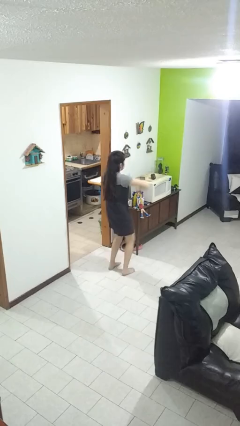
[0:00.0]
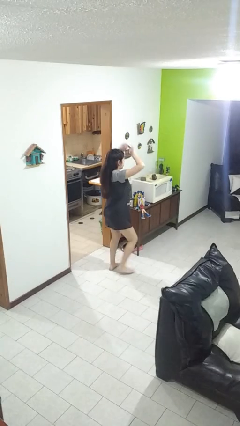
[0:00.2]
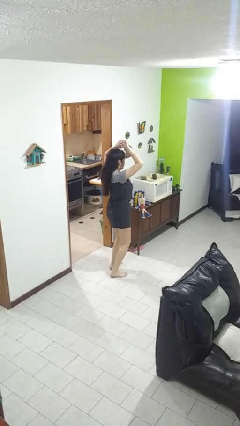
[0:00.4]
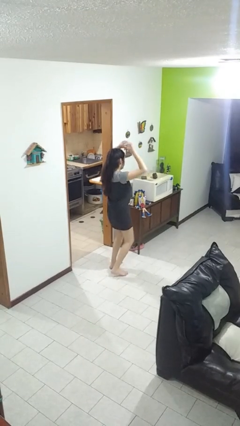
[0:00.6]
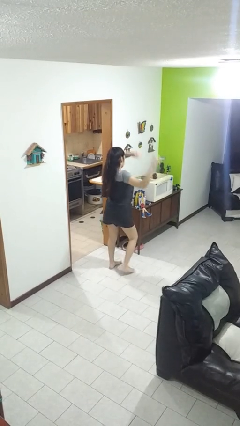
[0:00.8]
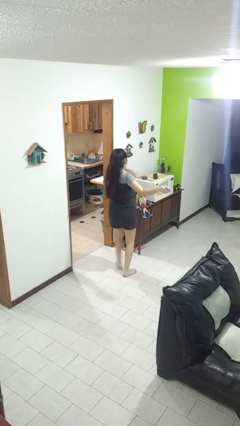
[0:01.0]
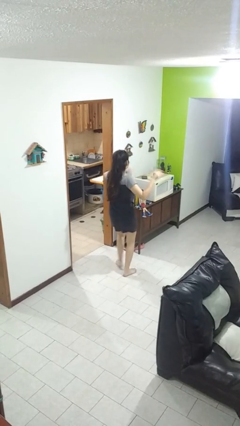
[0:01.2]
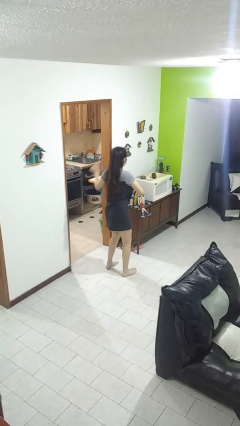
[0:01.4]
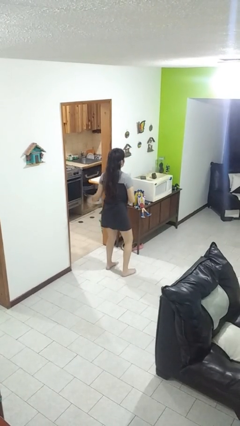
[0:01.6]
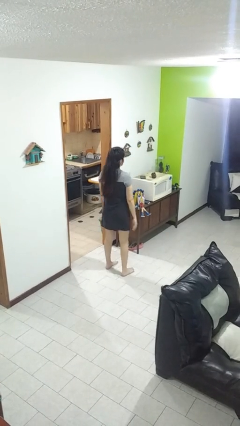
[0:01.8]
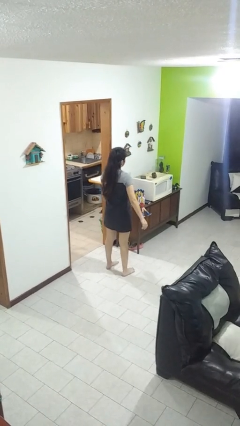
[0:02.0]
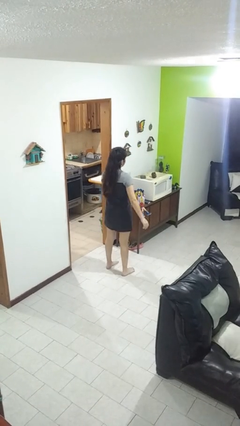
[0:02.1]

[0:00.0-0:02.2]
person dances in place

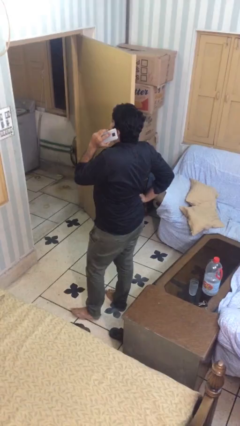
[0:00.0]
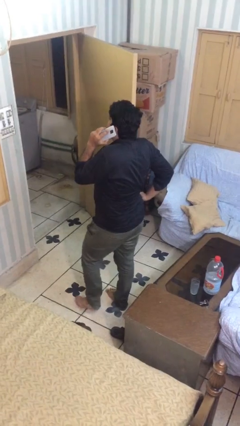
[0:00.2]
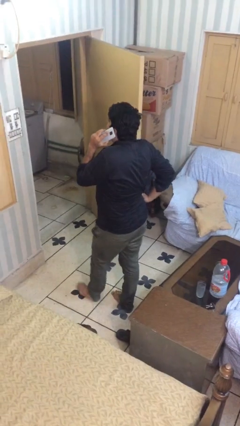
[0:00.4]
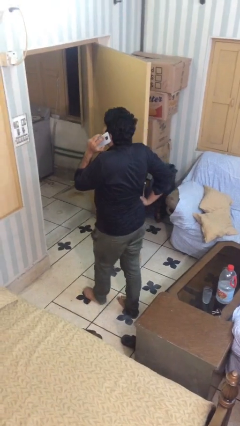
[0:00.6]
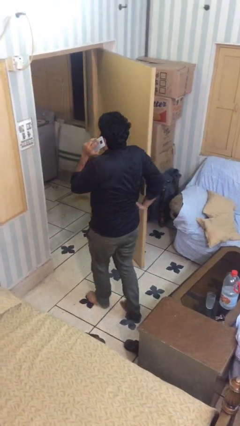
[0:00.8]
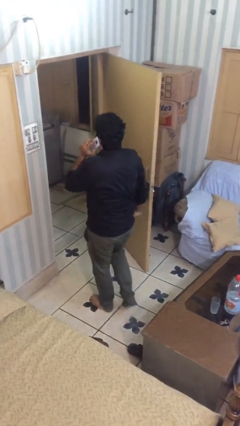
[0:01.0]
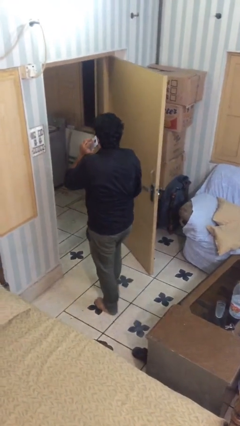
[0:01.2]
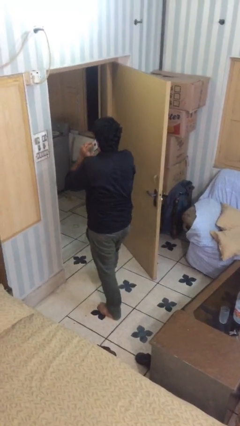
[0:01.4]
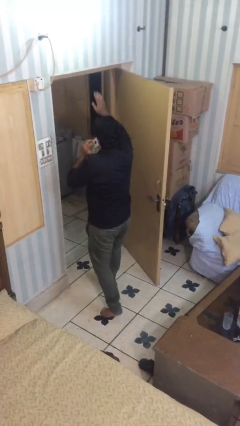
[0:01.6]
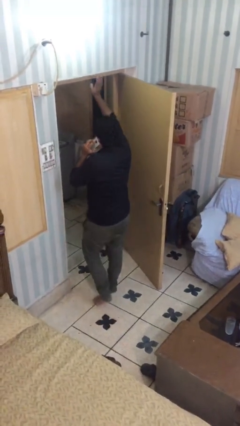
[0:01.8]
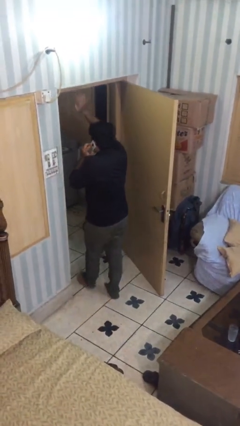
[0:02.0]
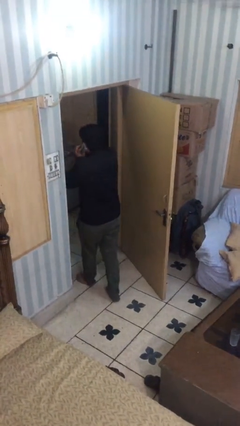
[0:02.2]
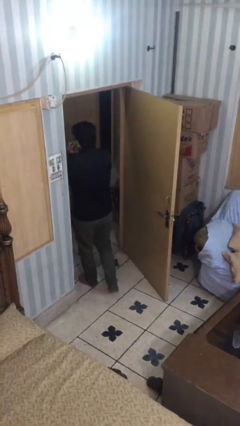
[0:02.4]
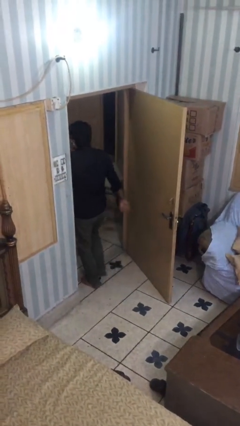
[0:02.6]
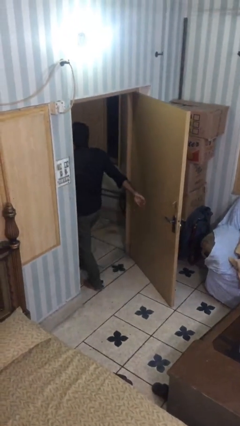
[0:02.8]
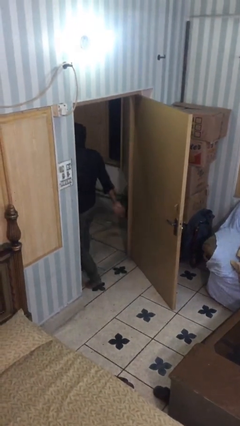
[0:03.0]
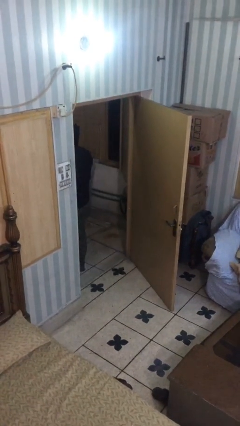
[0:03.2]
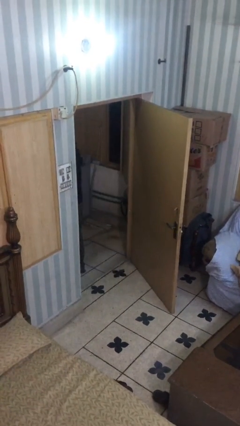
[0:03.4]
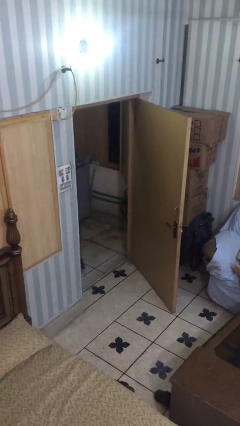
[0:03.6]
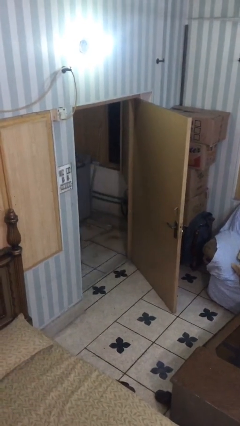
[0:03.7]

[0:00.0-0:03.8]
person exits scene through structure

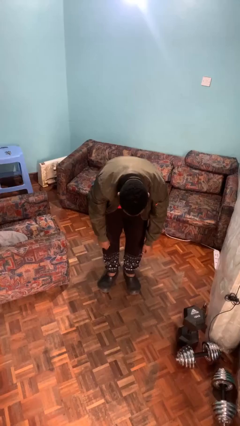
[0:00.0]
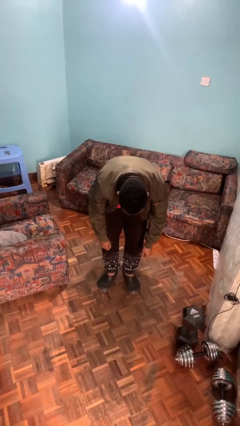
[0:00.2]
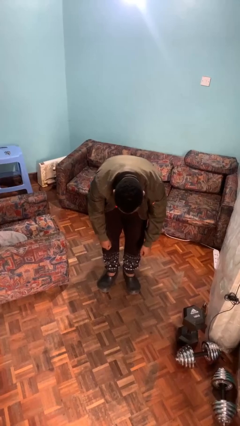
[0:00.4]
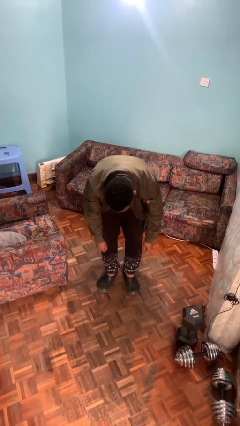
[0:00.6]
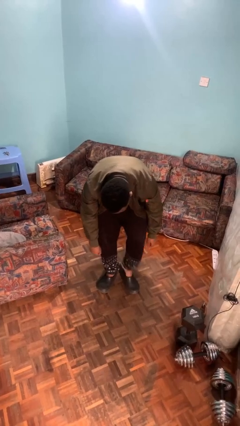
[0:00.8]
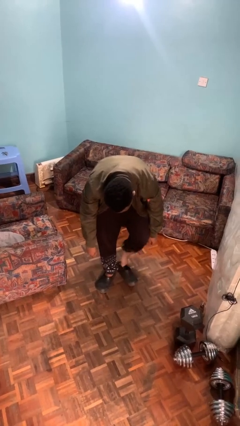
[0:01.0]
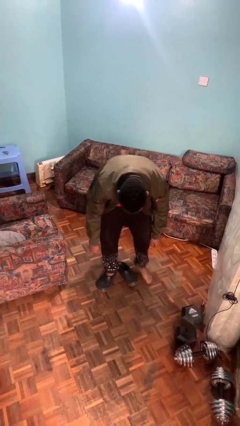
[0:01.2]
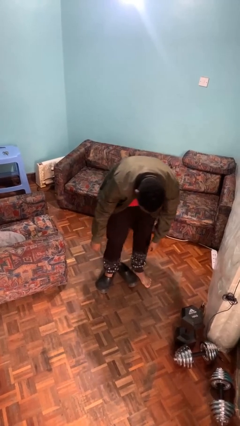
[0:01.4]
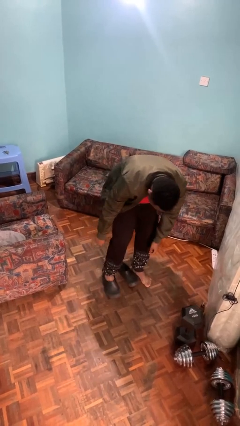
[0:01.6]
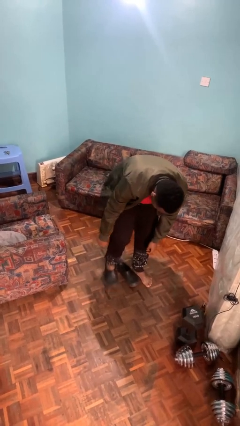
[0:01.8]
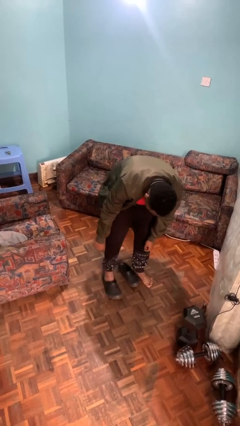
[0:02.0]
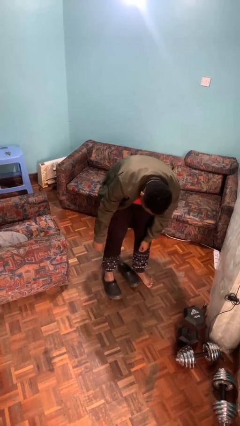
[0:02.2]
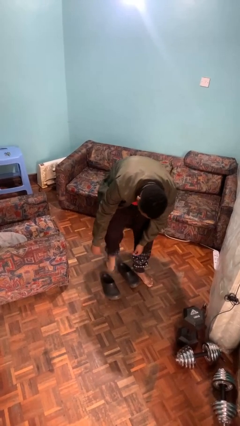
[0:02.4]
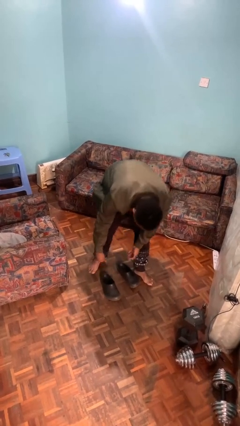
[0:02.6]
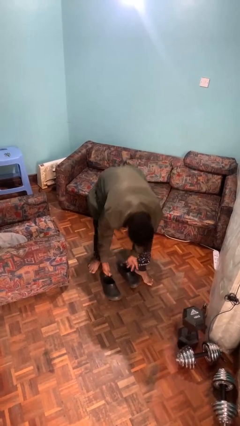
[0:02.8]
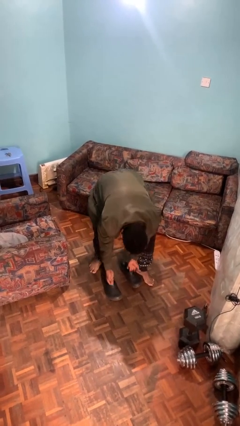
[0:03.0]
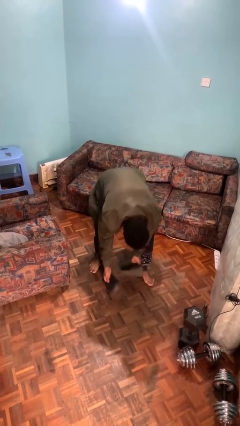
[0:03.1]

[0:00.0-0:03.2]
person takes off shoes

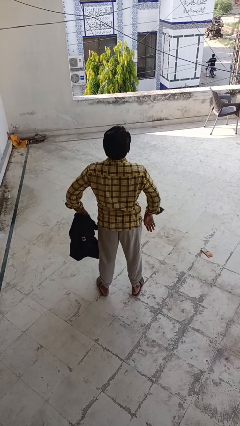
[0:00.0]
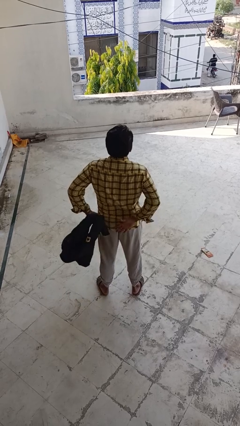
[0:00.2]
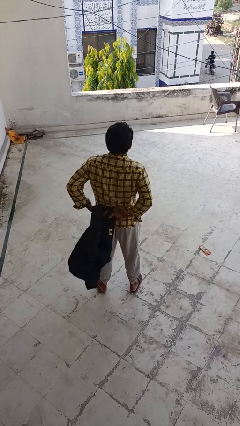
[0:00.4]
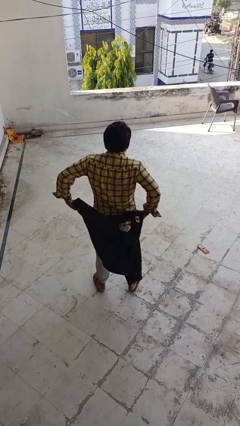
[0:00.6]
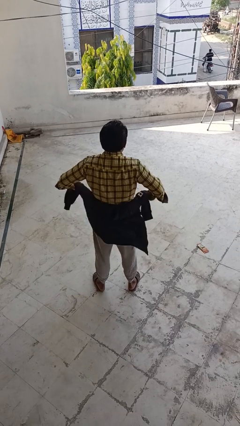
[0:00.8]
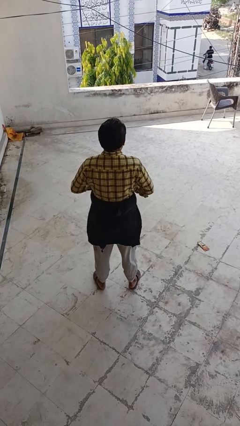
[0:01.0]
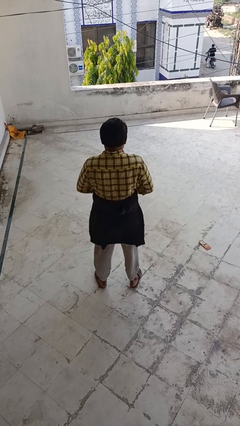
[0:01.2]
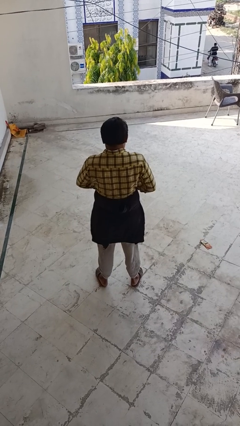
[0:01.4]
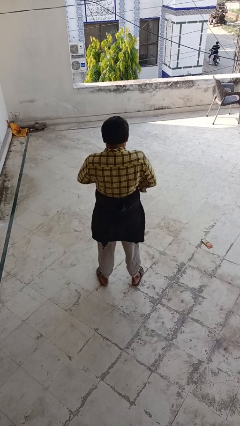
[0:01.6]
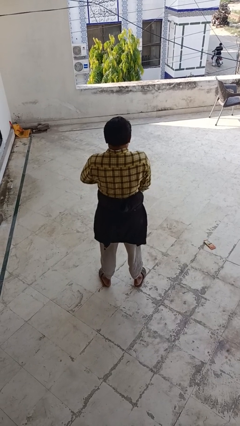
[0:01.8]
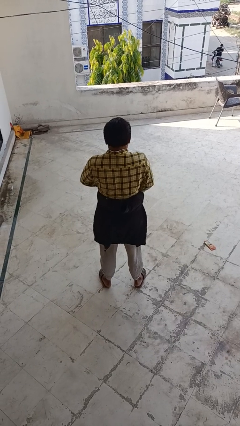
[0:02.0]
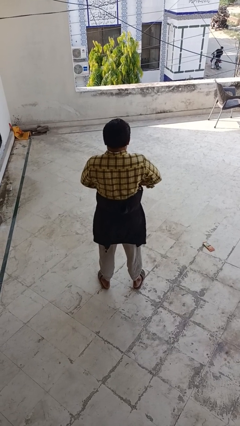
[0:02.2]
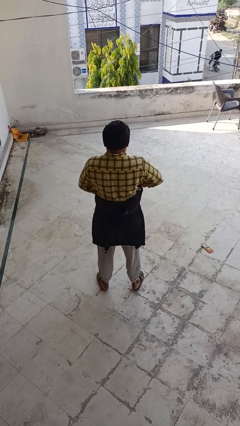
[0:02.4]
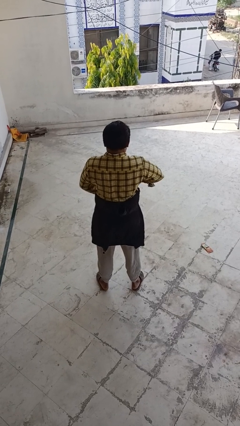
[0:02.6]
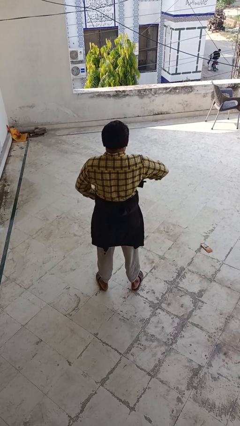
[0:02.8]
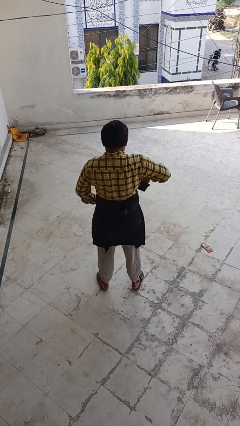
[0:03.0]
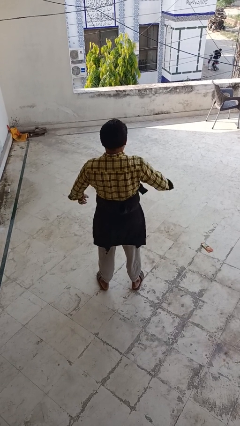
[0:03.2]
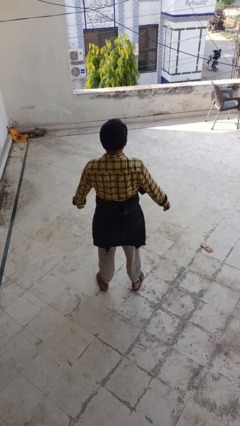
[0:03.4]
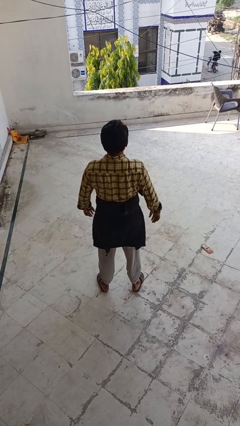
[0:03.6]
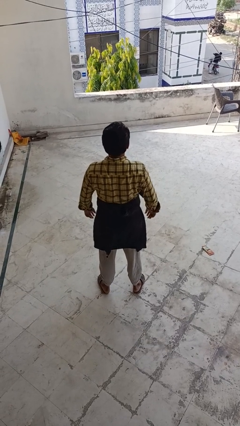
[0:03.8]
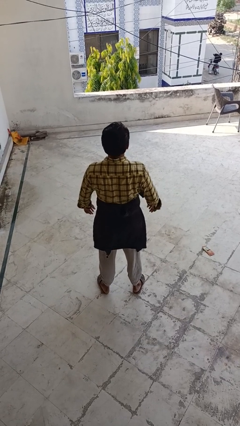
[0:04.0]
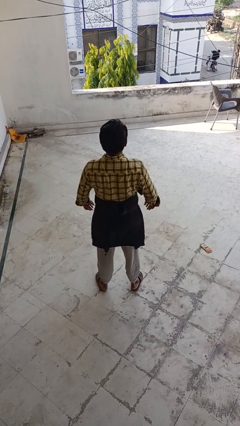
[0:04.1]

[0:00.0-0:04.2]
person ties jacket around waist

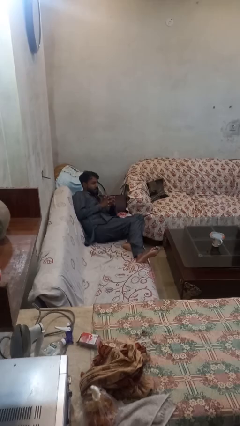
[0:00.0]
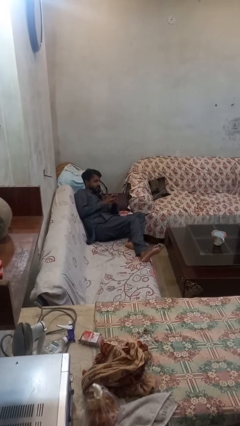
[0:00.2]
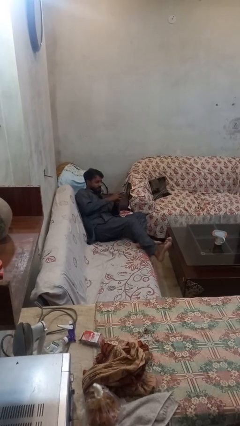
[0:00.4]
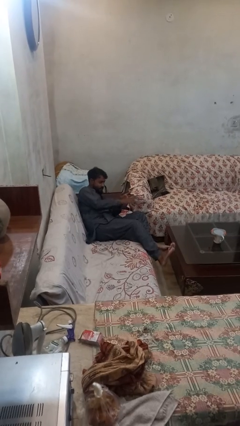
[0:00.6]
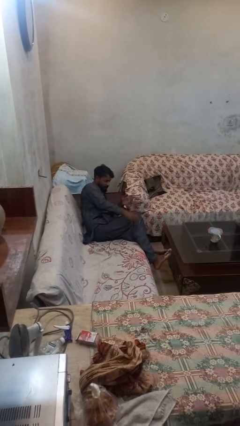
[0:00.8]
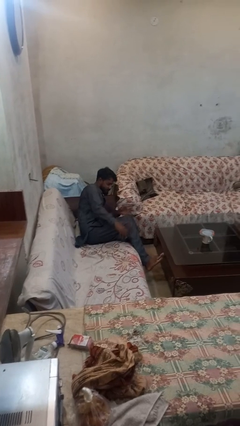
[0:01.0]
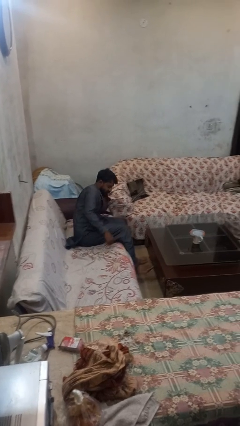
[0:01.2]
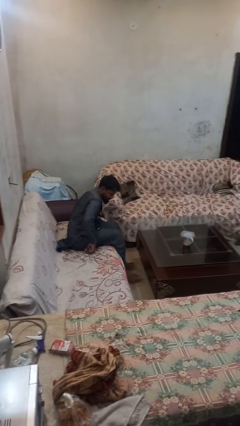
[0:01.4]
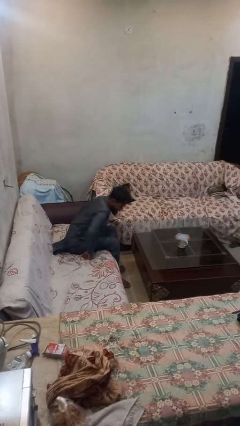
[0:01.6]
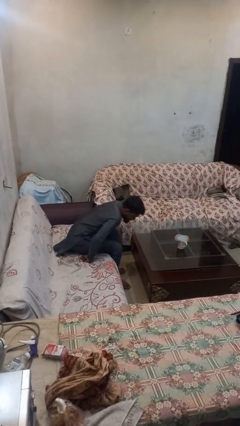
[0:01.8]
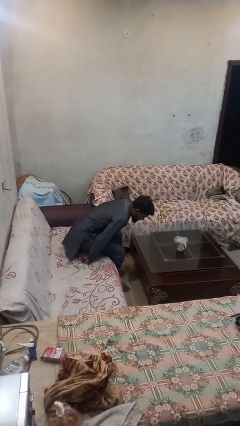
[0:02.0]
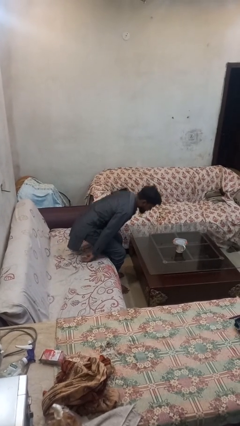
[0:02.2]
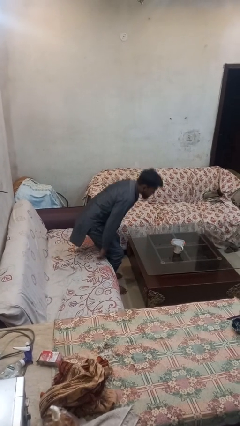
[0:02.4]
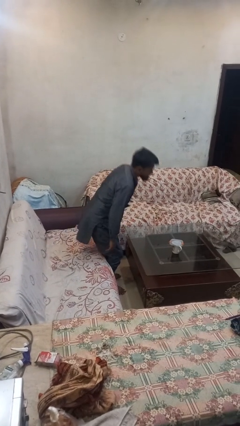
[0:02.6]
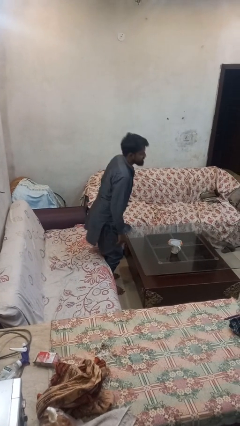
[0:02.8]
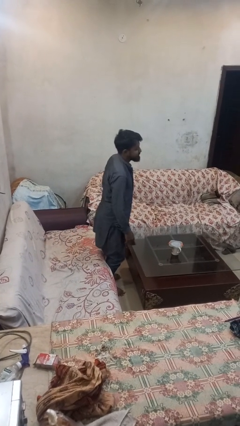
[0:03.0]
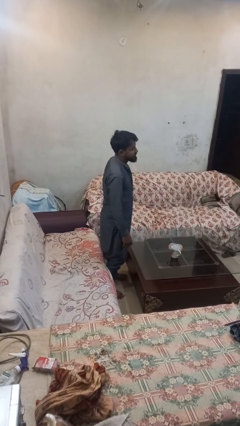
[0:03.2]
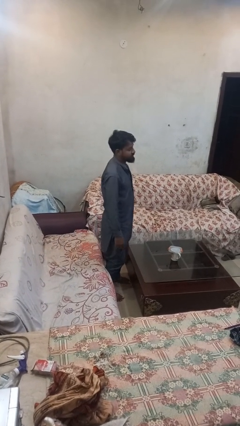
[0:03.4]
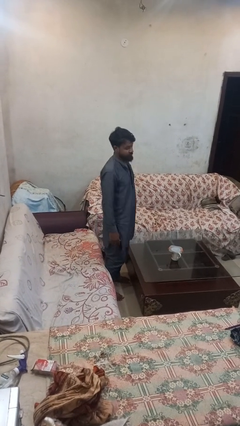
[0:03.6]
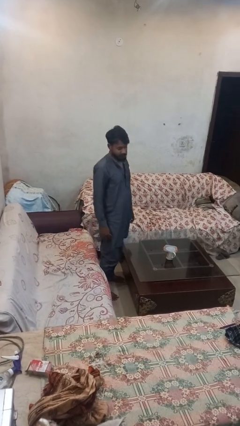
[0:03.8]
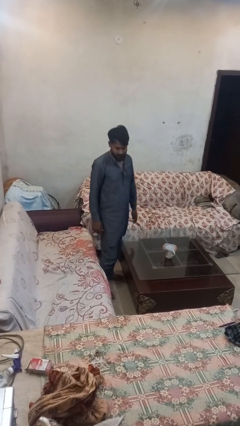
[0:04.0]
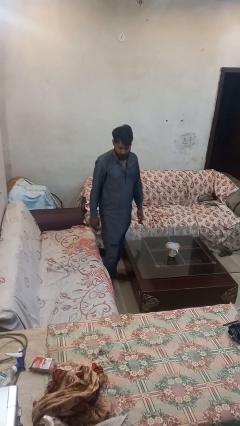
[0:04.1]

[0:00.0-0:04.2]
person stands up
